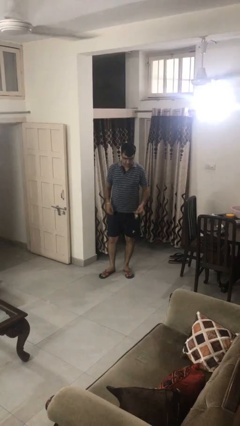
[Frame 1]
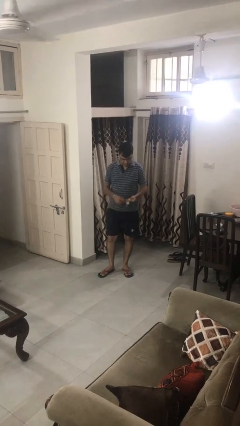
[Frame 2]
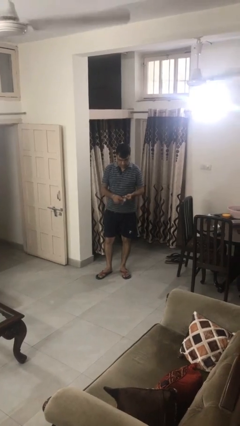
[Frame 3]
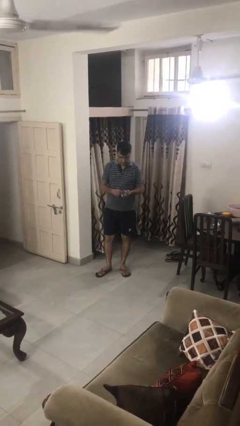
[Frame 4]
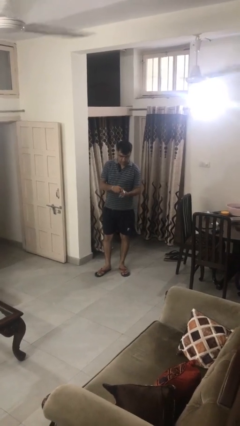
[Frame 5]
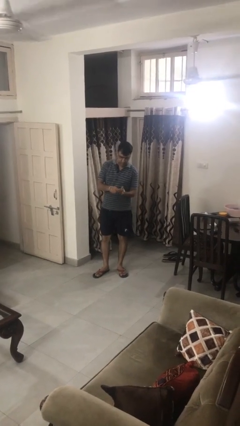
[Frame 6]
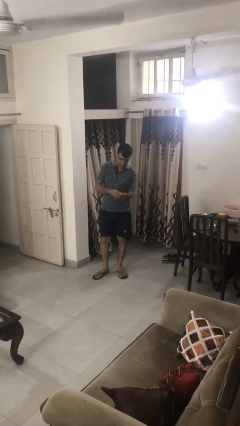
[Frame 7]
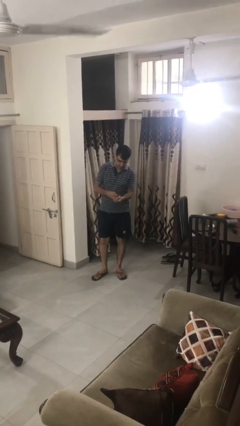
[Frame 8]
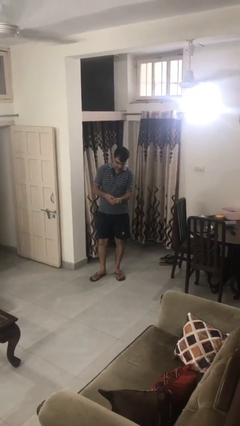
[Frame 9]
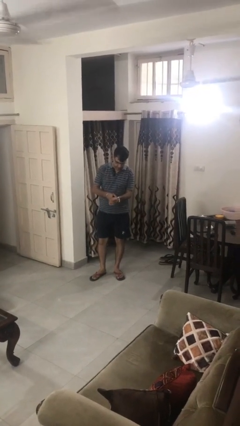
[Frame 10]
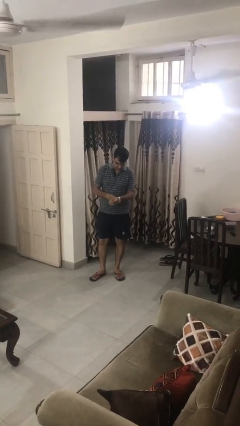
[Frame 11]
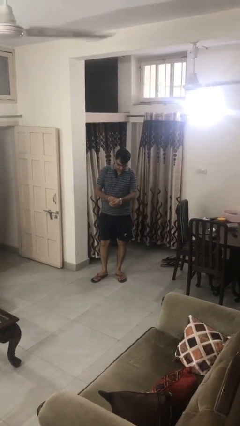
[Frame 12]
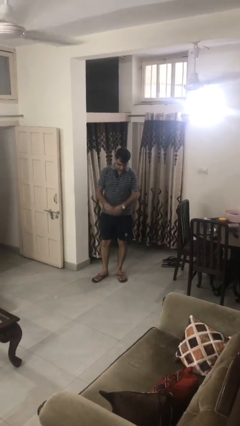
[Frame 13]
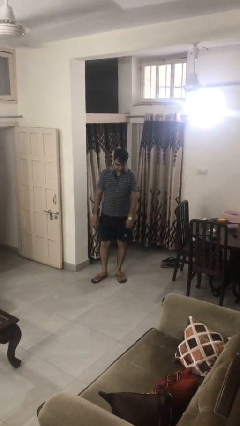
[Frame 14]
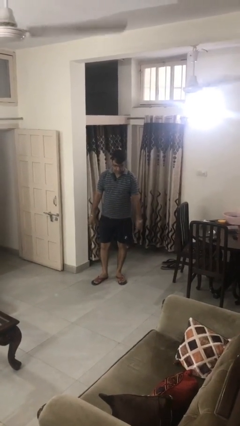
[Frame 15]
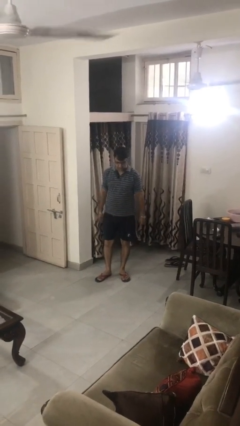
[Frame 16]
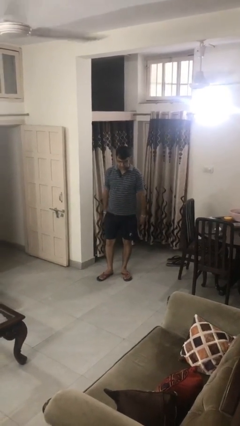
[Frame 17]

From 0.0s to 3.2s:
person puts on wristwatch

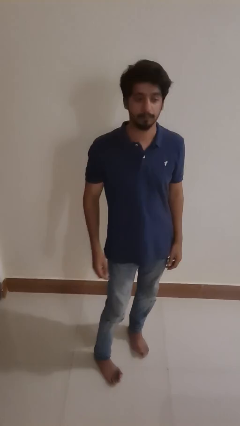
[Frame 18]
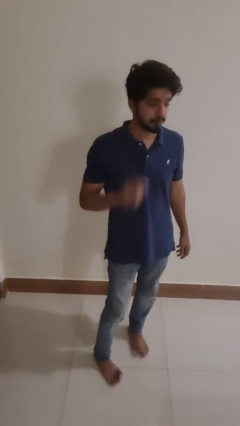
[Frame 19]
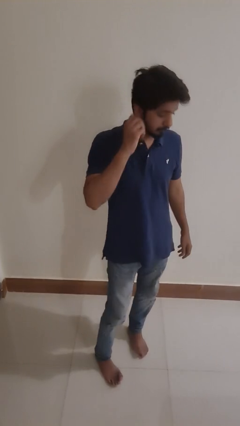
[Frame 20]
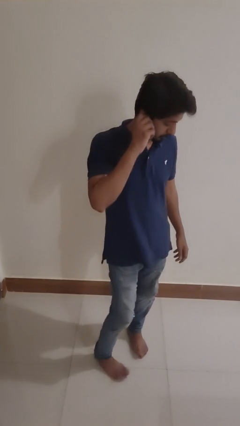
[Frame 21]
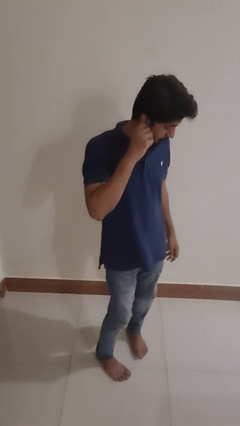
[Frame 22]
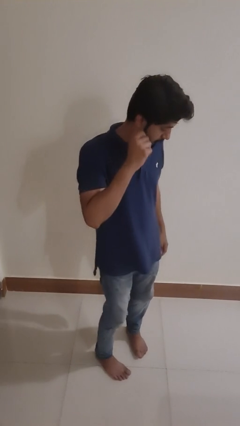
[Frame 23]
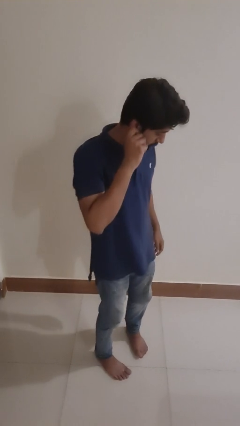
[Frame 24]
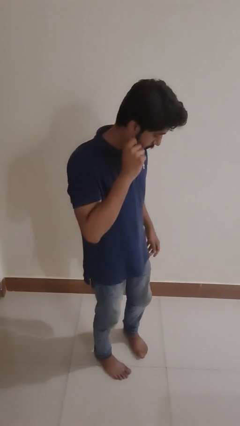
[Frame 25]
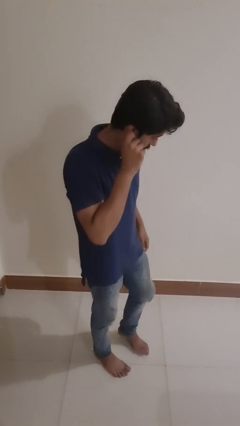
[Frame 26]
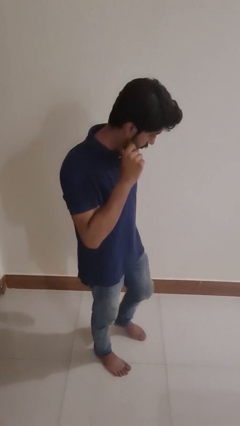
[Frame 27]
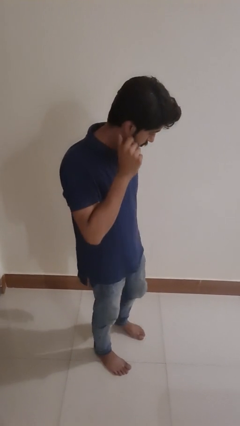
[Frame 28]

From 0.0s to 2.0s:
person touches earlobe

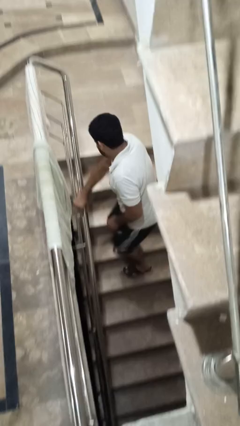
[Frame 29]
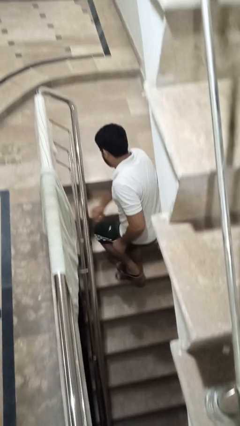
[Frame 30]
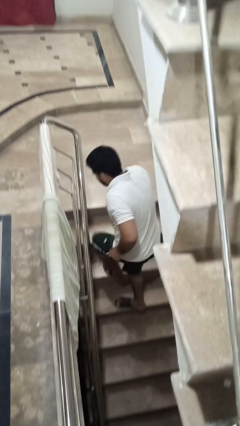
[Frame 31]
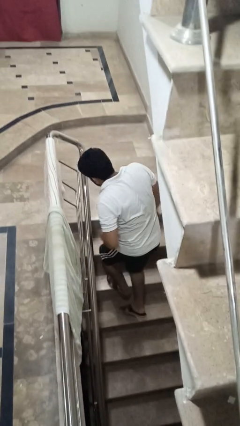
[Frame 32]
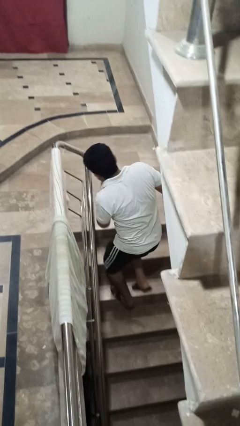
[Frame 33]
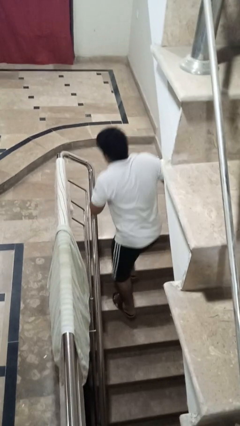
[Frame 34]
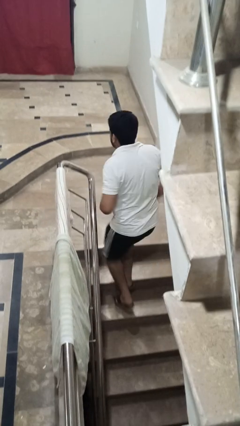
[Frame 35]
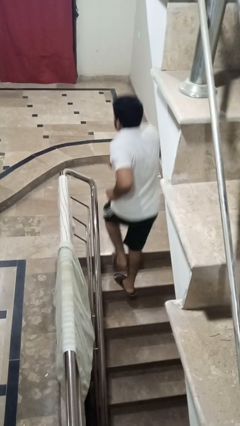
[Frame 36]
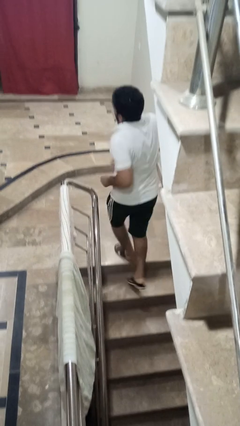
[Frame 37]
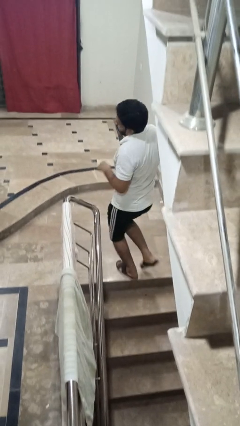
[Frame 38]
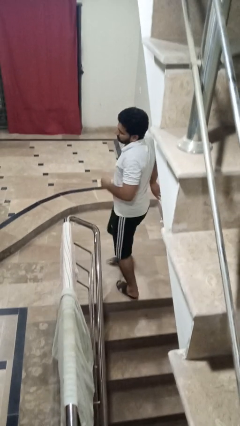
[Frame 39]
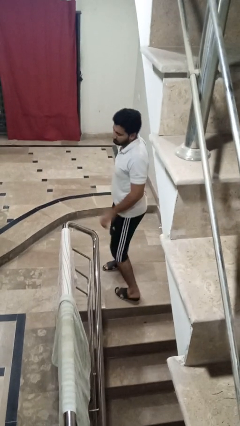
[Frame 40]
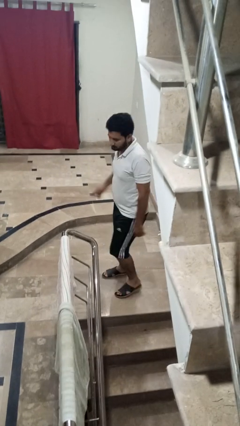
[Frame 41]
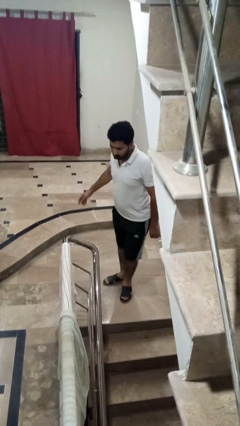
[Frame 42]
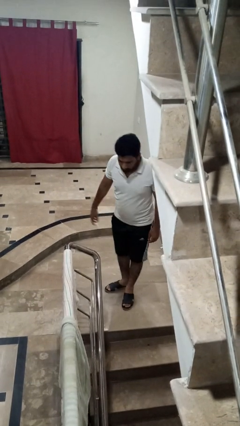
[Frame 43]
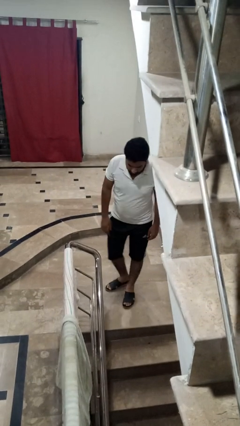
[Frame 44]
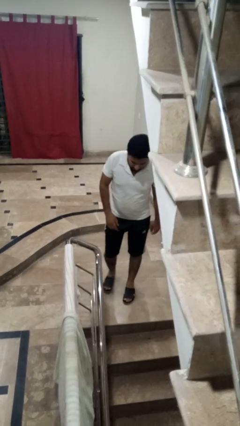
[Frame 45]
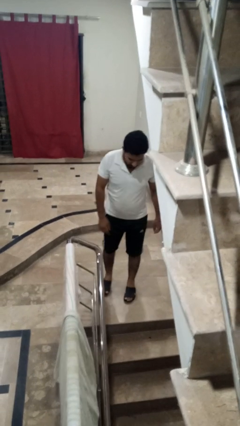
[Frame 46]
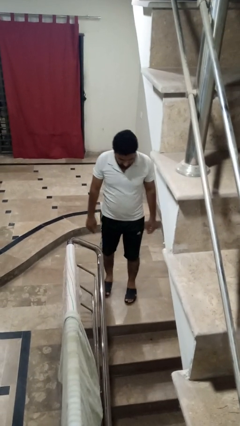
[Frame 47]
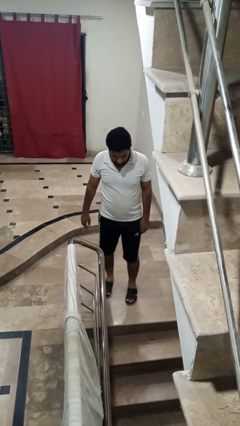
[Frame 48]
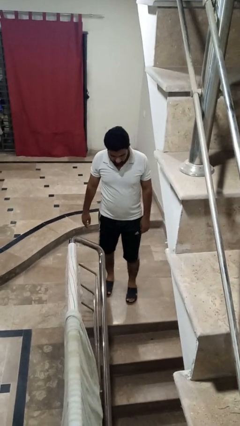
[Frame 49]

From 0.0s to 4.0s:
person climbs up stairs

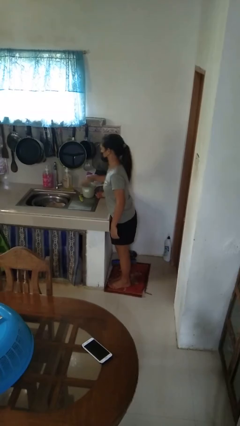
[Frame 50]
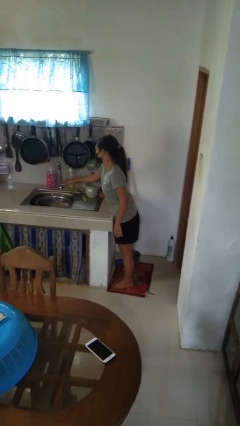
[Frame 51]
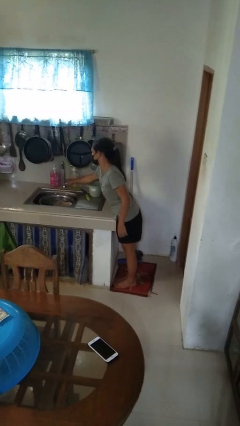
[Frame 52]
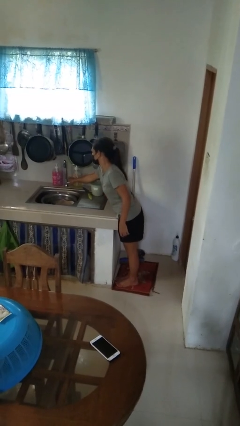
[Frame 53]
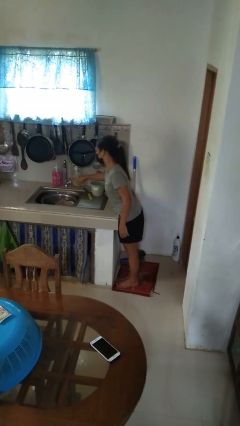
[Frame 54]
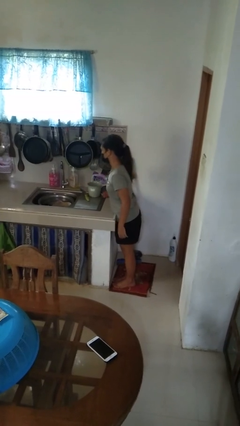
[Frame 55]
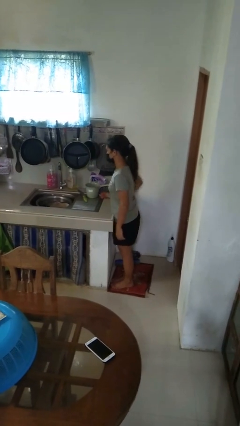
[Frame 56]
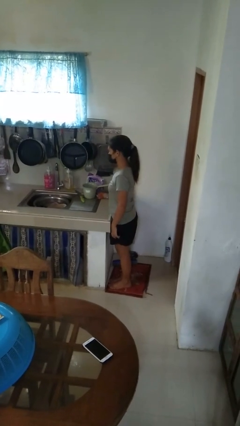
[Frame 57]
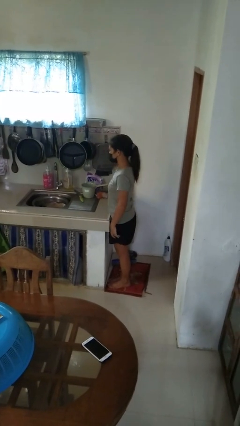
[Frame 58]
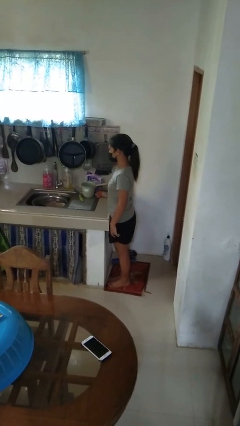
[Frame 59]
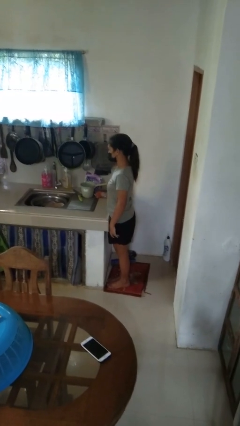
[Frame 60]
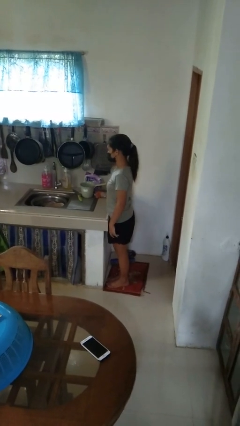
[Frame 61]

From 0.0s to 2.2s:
person turns off faucet

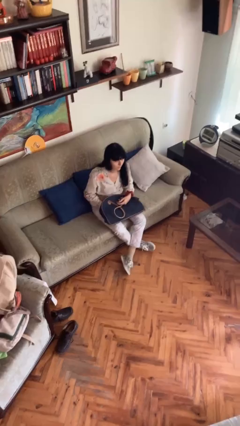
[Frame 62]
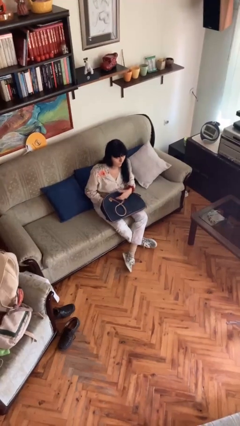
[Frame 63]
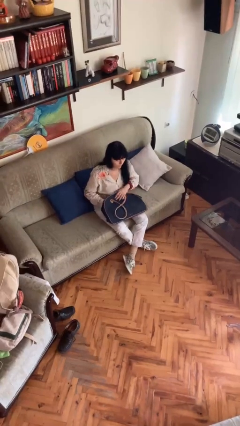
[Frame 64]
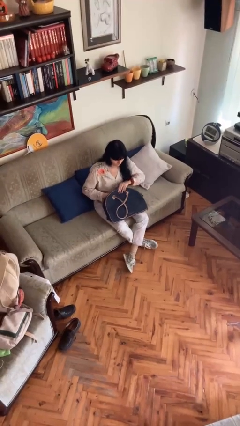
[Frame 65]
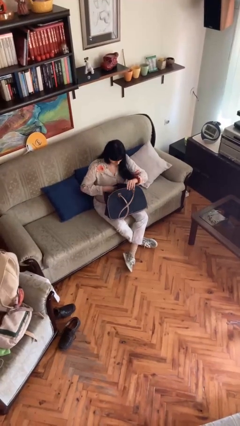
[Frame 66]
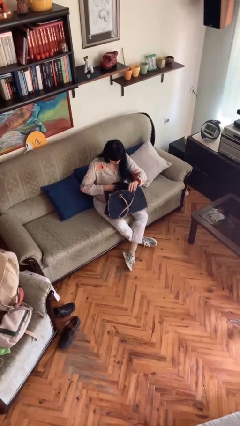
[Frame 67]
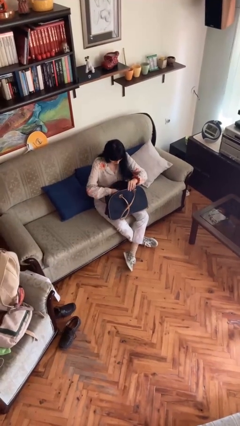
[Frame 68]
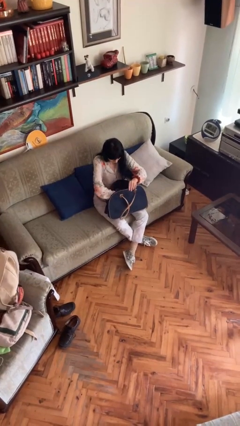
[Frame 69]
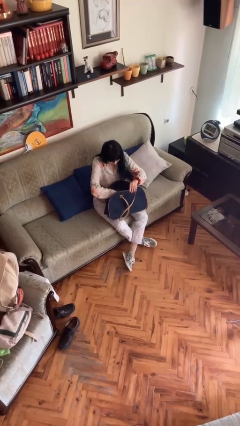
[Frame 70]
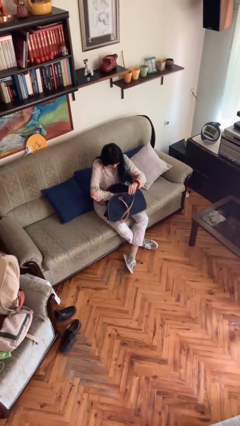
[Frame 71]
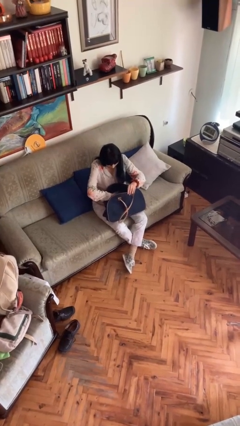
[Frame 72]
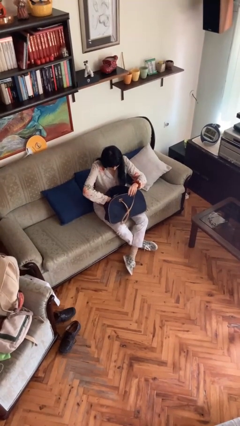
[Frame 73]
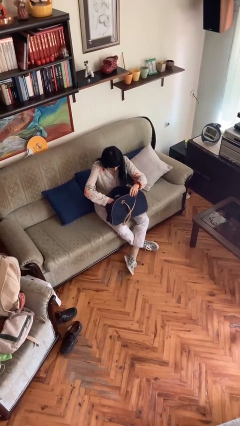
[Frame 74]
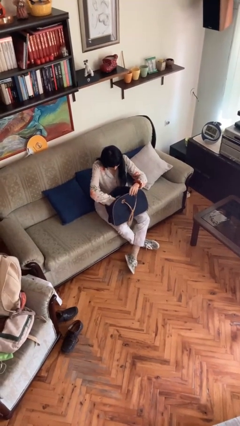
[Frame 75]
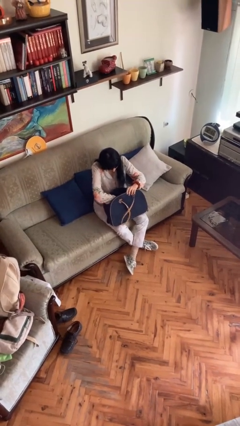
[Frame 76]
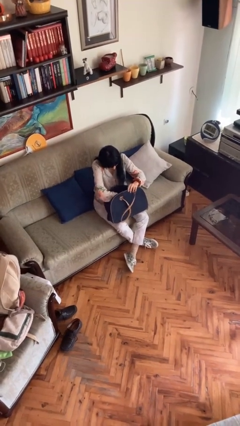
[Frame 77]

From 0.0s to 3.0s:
person searches in purse

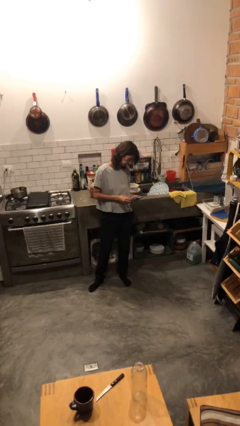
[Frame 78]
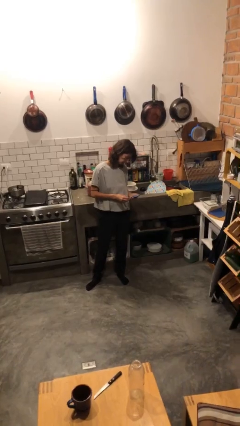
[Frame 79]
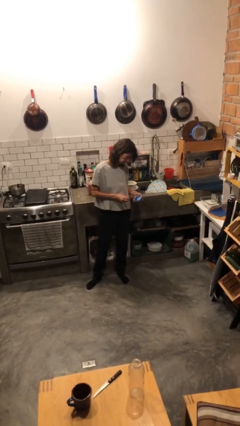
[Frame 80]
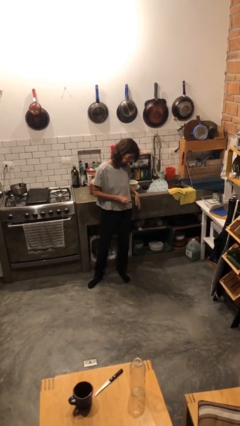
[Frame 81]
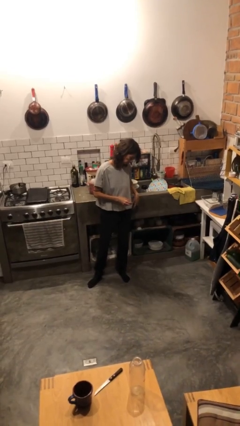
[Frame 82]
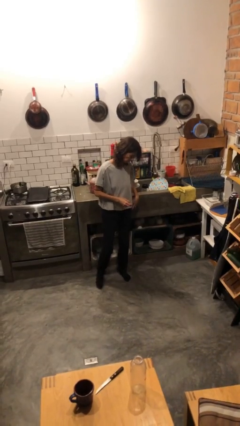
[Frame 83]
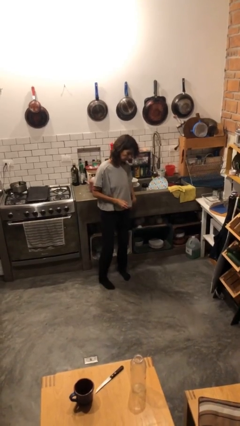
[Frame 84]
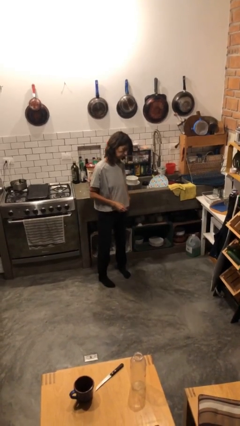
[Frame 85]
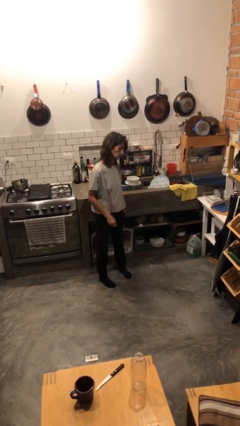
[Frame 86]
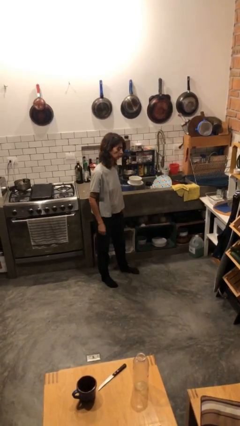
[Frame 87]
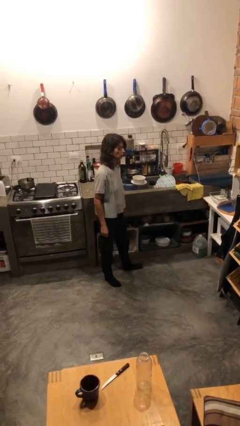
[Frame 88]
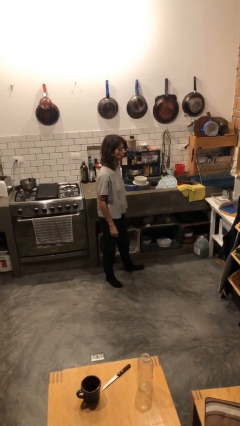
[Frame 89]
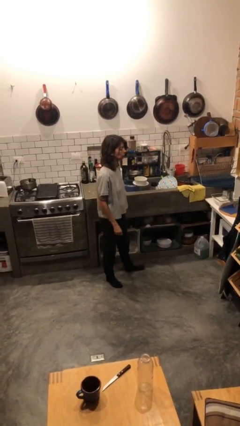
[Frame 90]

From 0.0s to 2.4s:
person puts phone into pocket

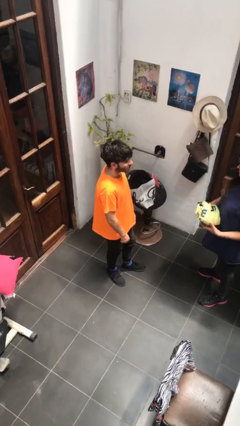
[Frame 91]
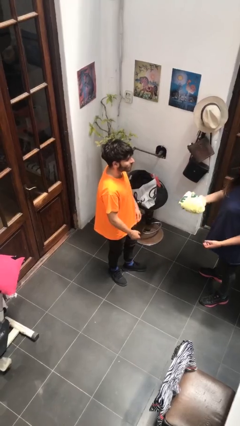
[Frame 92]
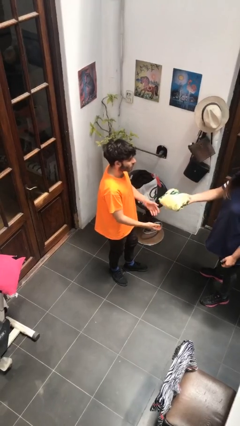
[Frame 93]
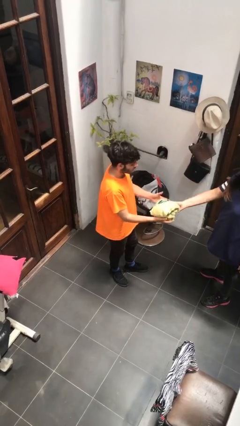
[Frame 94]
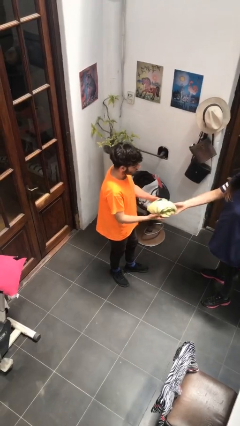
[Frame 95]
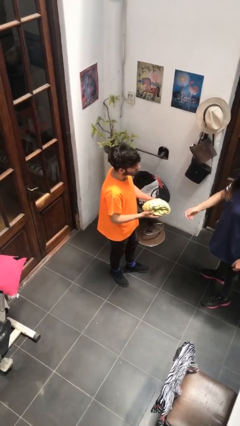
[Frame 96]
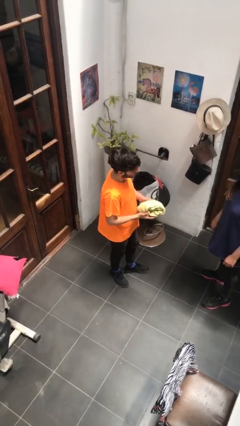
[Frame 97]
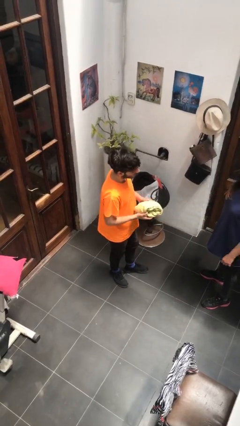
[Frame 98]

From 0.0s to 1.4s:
person transfers object to person
